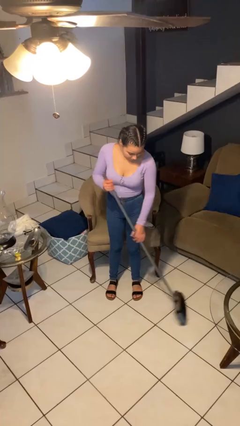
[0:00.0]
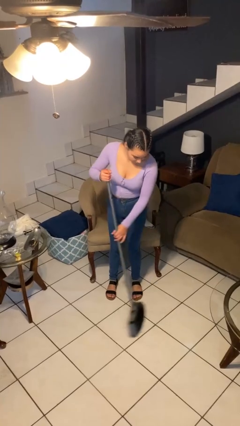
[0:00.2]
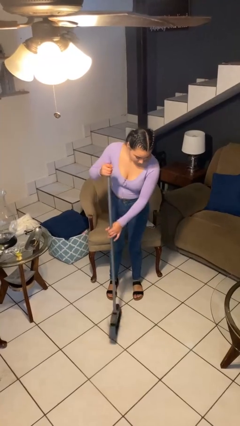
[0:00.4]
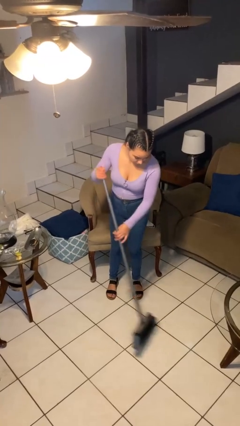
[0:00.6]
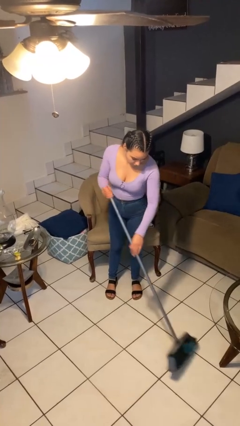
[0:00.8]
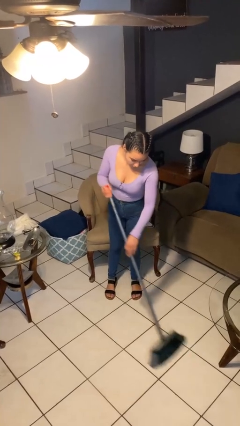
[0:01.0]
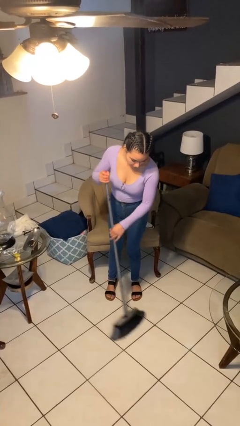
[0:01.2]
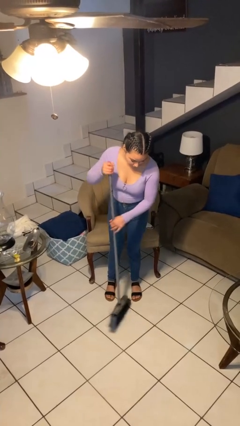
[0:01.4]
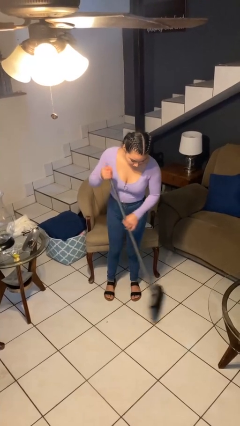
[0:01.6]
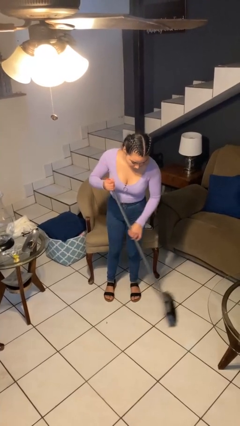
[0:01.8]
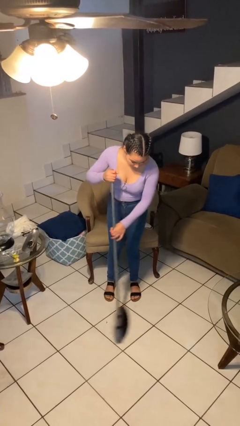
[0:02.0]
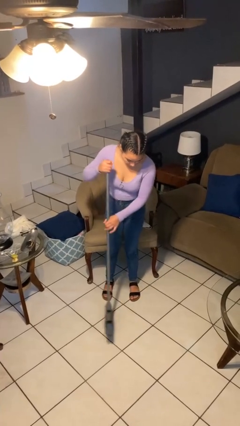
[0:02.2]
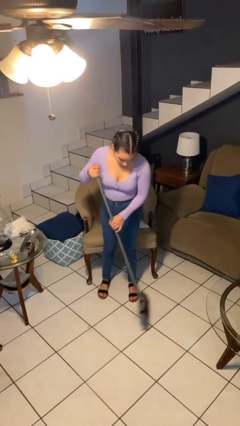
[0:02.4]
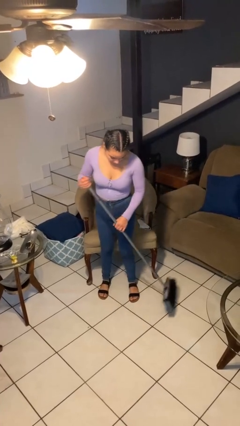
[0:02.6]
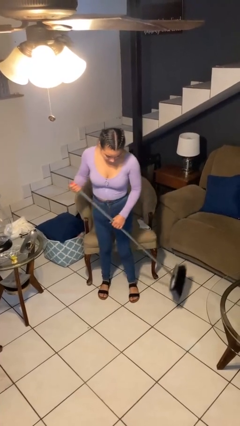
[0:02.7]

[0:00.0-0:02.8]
person sweeps floor

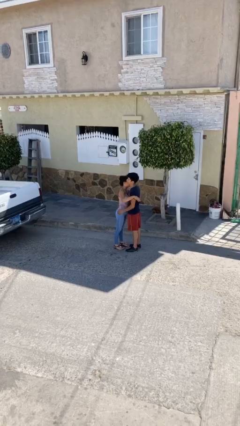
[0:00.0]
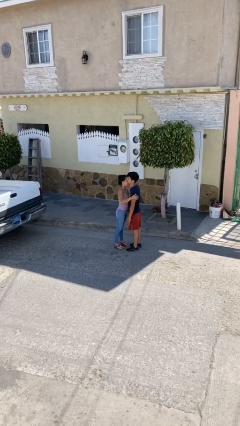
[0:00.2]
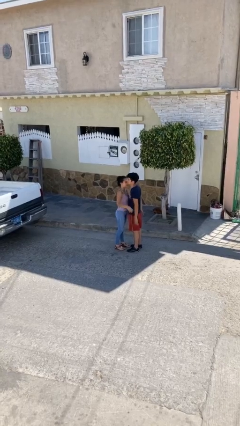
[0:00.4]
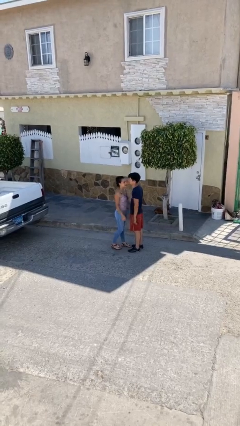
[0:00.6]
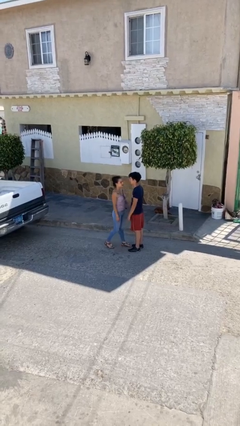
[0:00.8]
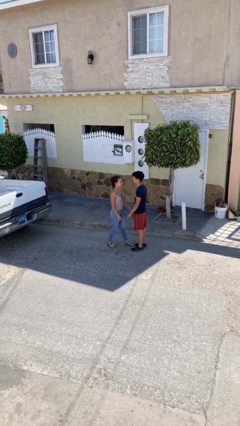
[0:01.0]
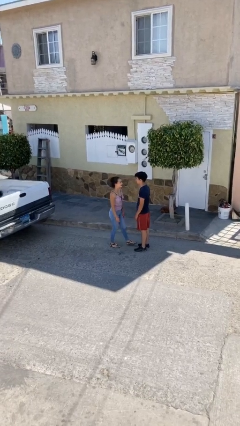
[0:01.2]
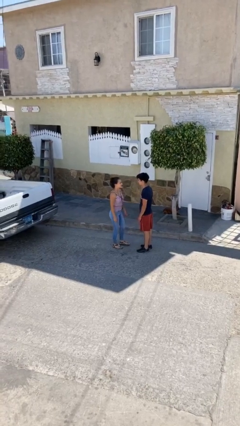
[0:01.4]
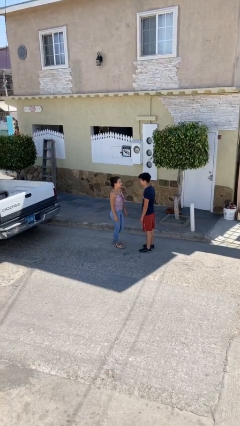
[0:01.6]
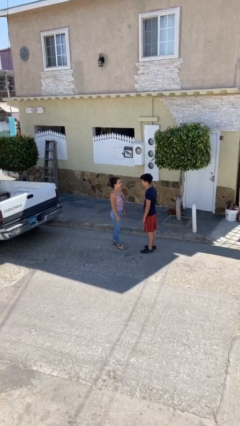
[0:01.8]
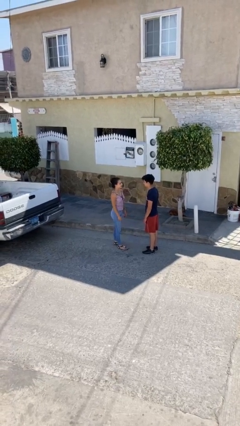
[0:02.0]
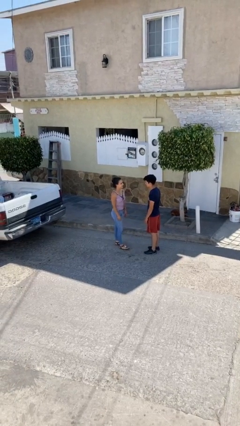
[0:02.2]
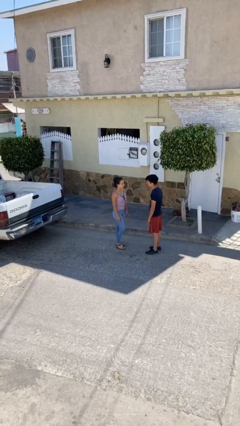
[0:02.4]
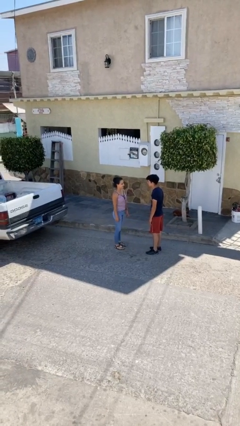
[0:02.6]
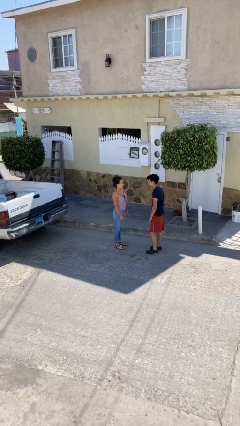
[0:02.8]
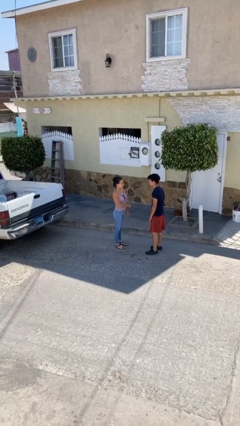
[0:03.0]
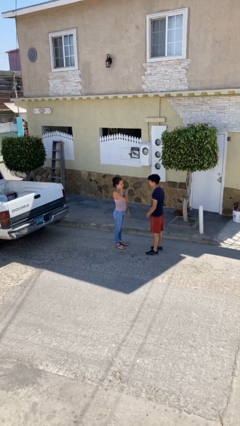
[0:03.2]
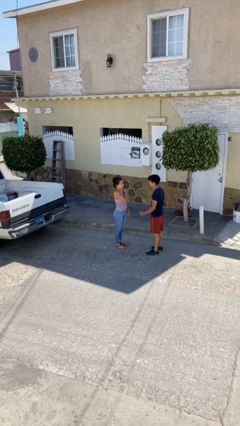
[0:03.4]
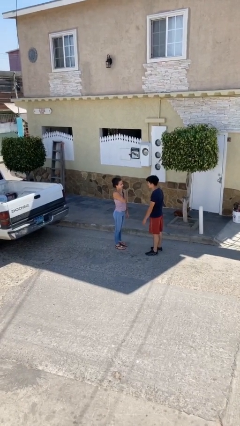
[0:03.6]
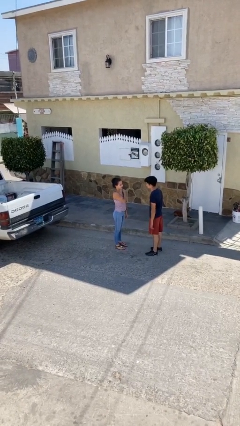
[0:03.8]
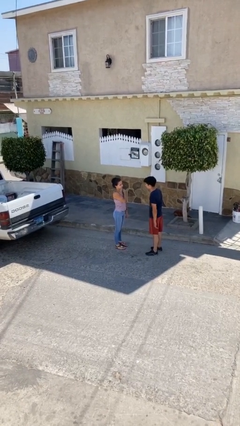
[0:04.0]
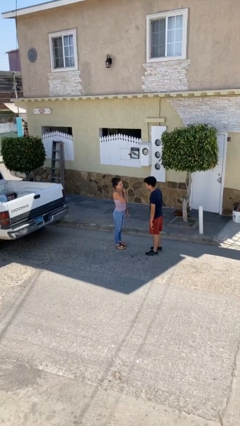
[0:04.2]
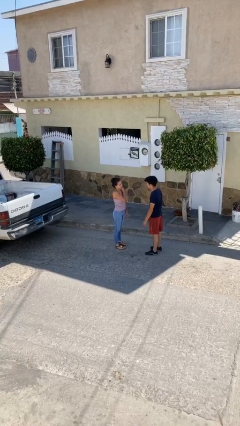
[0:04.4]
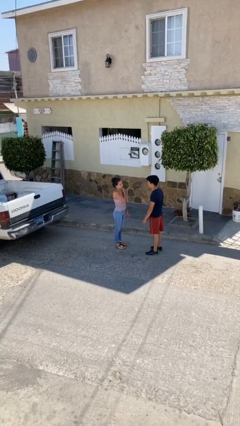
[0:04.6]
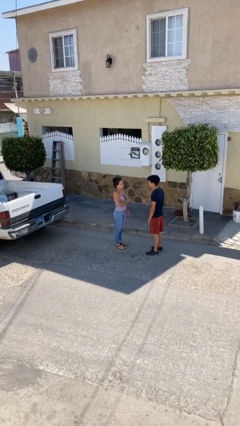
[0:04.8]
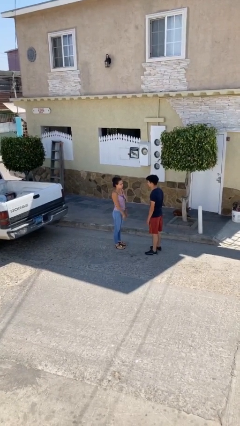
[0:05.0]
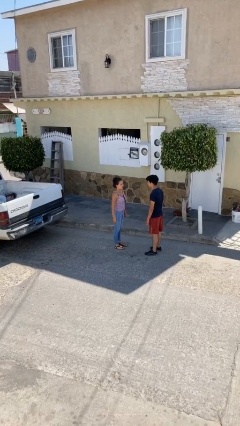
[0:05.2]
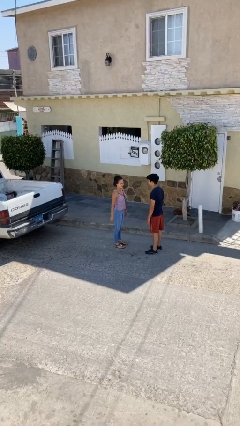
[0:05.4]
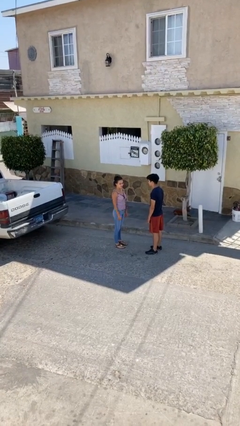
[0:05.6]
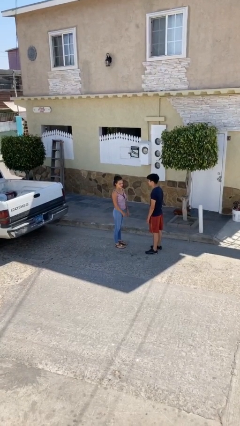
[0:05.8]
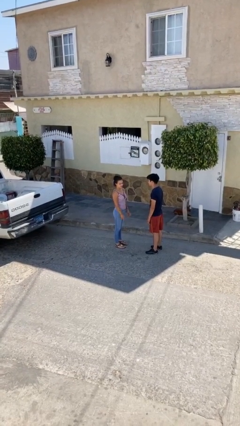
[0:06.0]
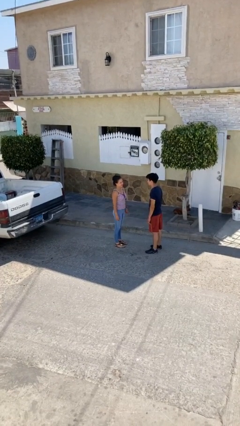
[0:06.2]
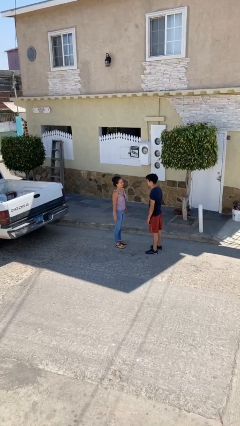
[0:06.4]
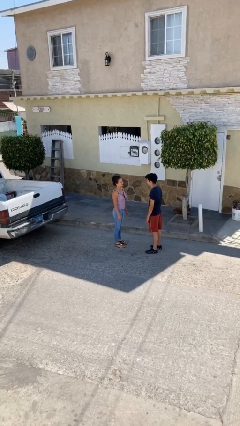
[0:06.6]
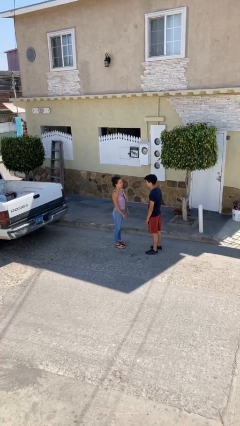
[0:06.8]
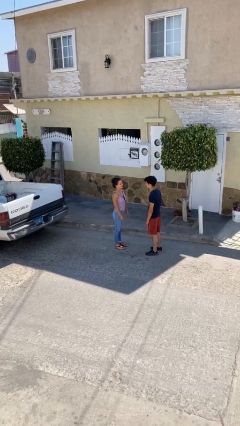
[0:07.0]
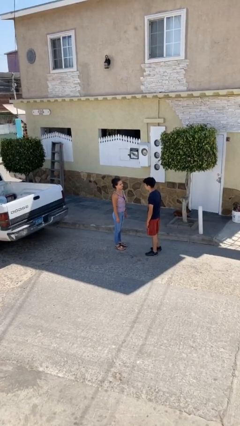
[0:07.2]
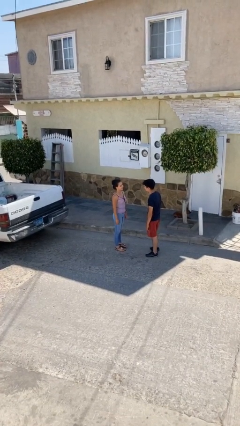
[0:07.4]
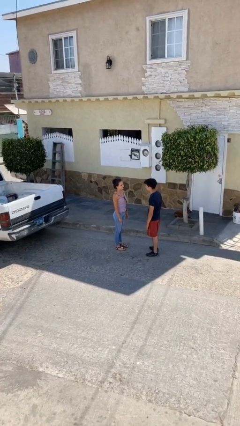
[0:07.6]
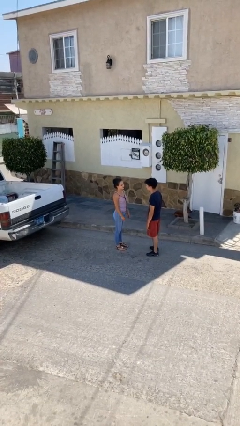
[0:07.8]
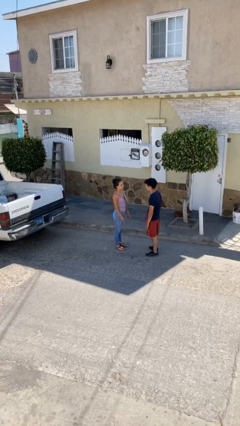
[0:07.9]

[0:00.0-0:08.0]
person talks to person

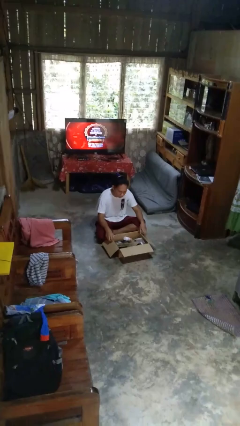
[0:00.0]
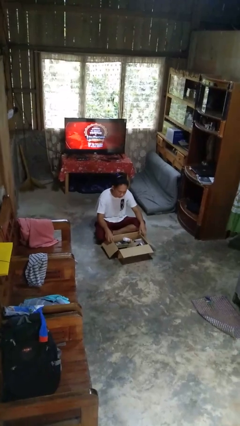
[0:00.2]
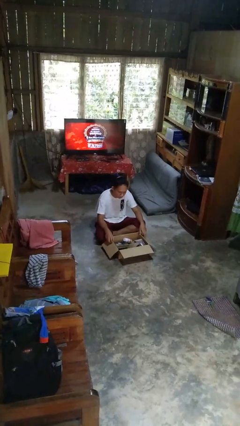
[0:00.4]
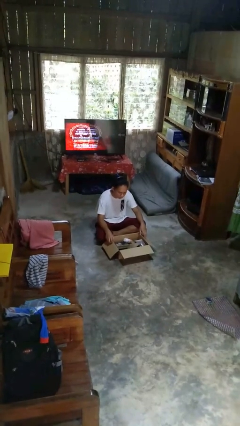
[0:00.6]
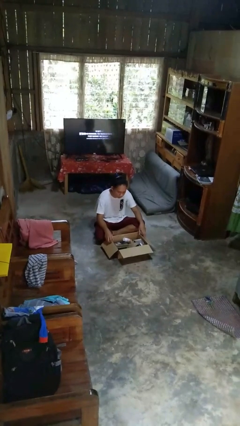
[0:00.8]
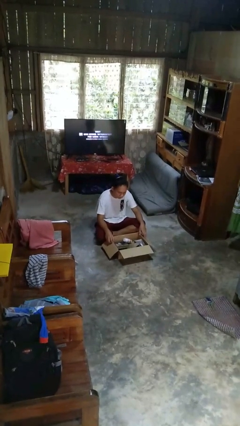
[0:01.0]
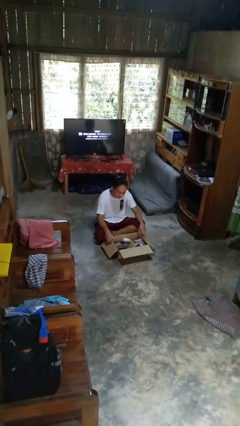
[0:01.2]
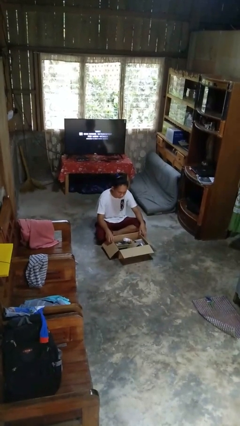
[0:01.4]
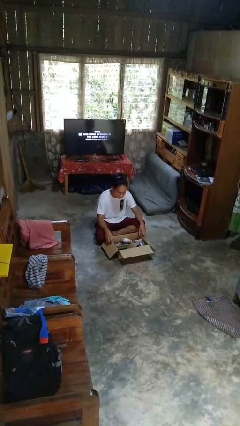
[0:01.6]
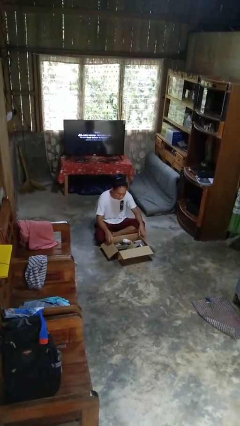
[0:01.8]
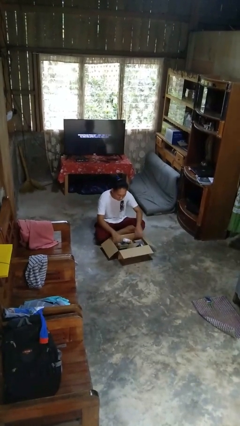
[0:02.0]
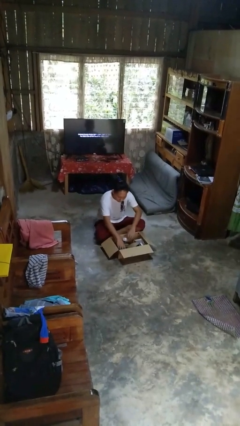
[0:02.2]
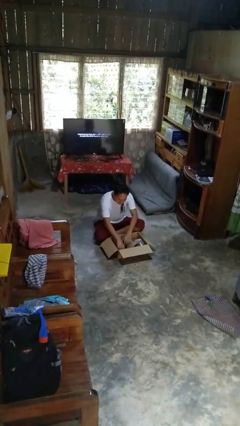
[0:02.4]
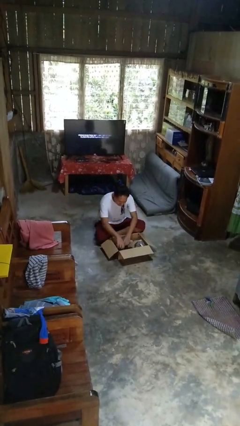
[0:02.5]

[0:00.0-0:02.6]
person searches in box

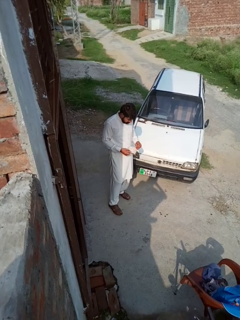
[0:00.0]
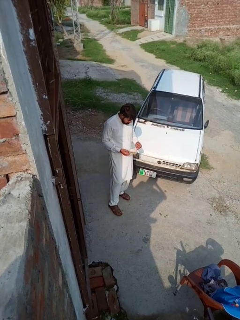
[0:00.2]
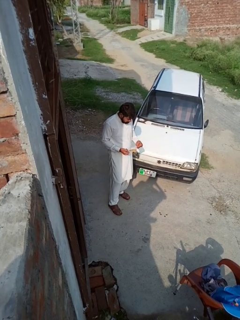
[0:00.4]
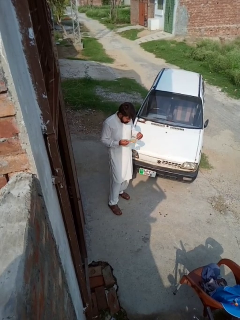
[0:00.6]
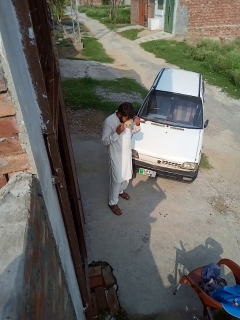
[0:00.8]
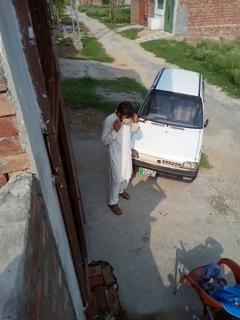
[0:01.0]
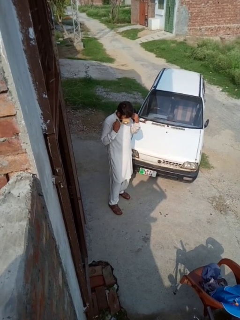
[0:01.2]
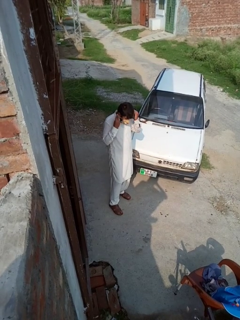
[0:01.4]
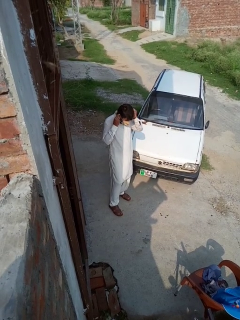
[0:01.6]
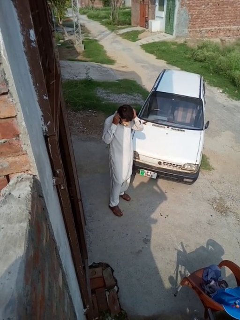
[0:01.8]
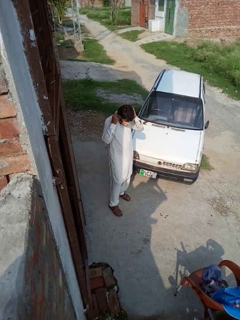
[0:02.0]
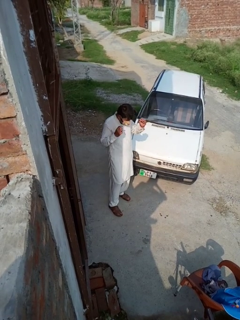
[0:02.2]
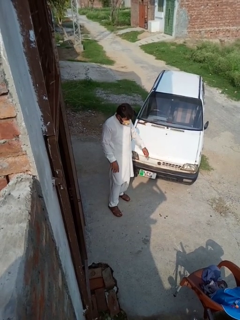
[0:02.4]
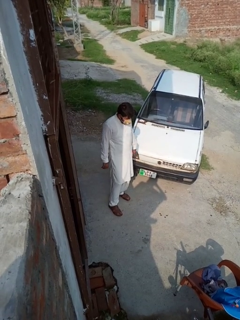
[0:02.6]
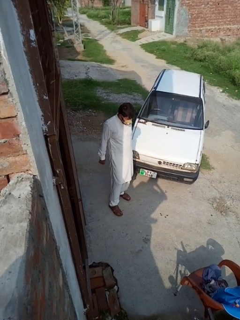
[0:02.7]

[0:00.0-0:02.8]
person puts on facemask

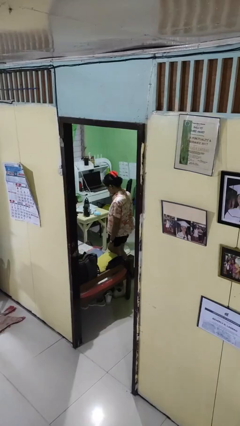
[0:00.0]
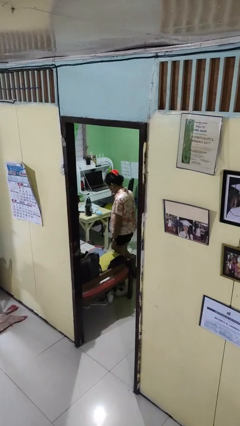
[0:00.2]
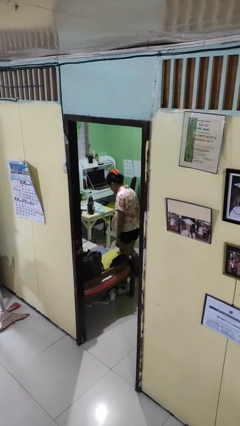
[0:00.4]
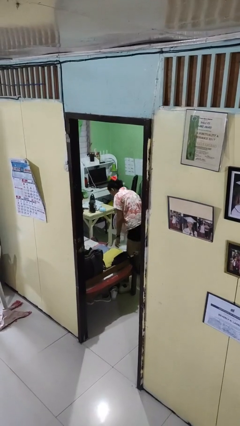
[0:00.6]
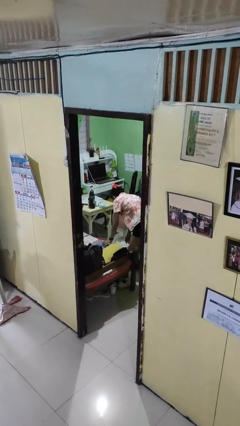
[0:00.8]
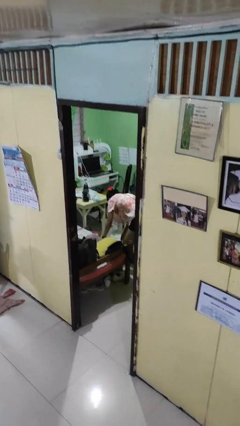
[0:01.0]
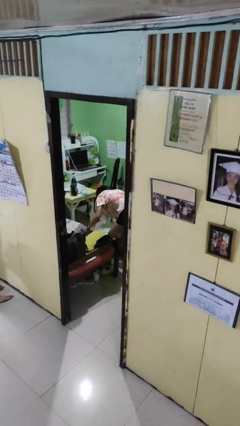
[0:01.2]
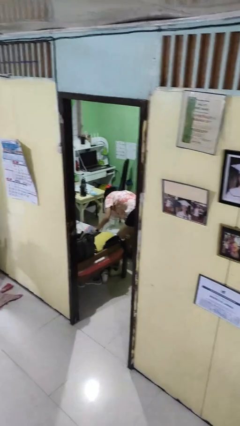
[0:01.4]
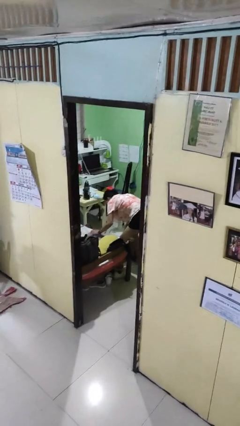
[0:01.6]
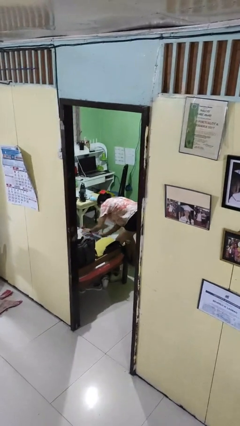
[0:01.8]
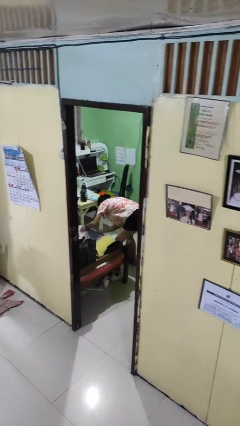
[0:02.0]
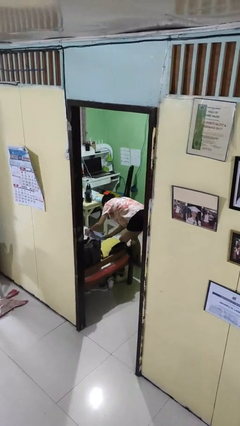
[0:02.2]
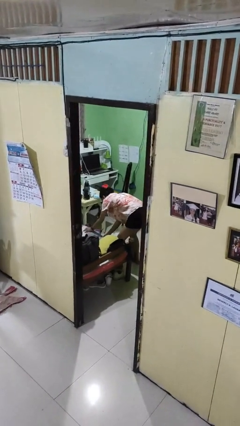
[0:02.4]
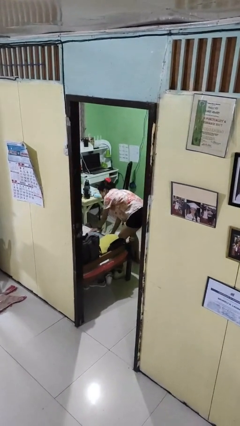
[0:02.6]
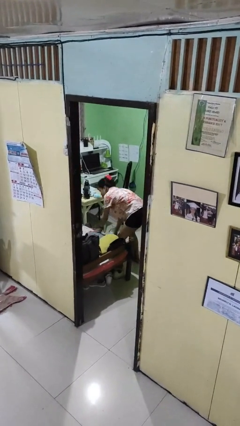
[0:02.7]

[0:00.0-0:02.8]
person searches under bed
